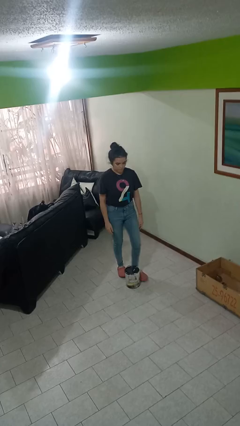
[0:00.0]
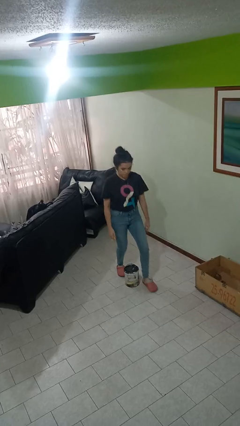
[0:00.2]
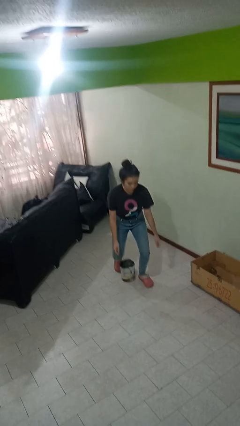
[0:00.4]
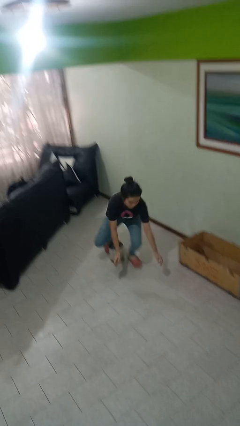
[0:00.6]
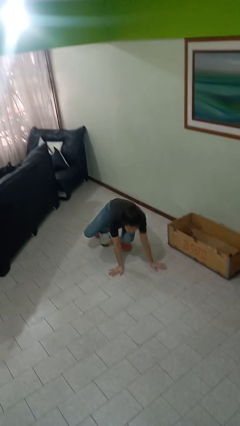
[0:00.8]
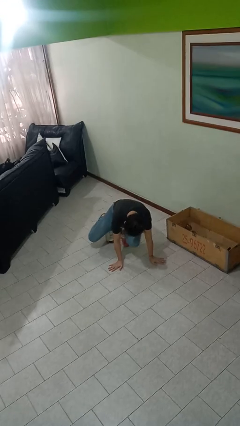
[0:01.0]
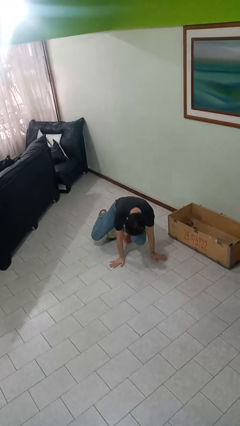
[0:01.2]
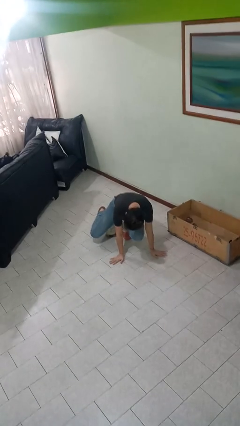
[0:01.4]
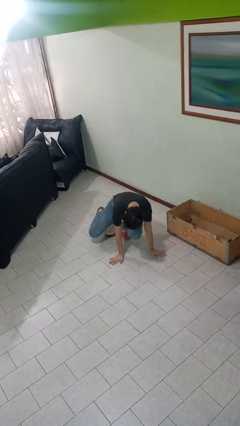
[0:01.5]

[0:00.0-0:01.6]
person trips on object on floor

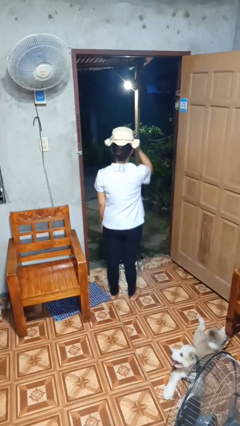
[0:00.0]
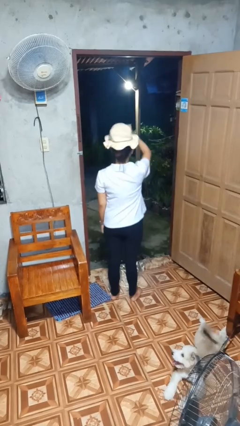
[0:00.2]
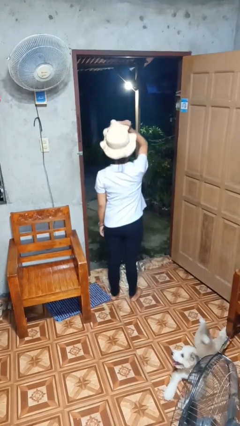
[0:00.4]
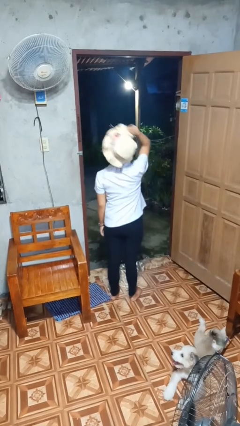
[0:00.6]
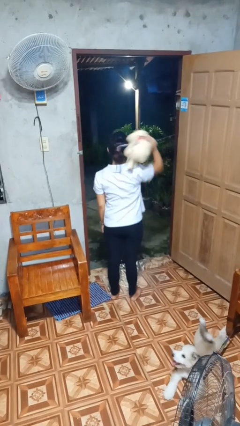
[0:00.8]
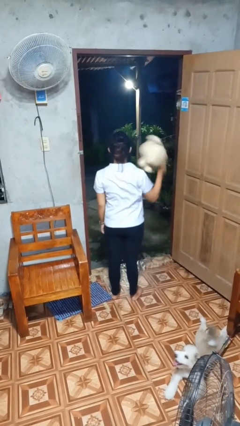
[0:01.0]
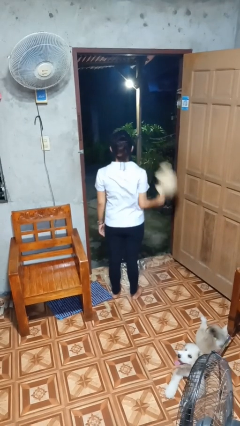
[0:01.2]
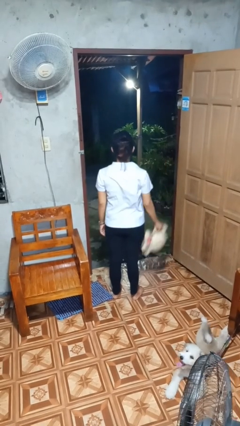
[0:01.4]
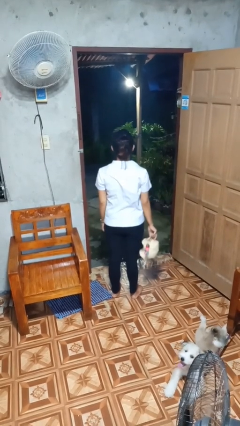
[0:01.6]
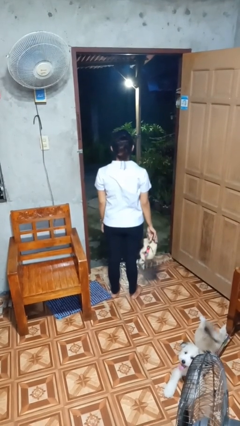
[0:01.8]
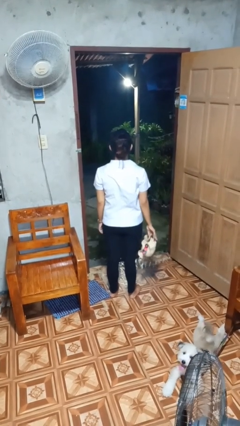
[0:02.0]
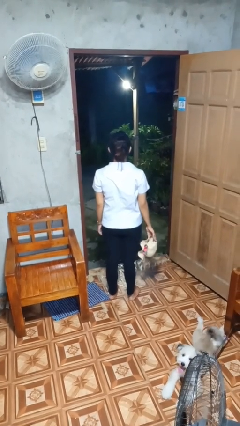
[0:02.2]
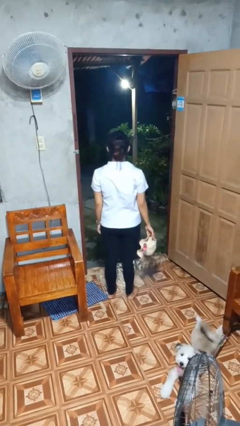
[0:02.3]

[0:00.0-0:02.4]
person takes off hat

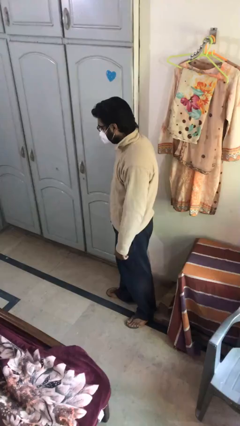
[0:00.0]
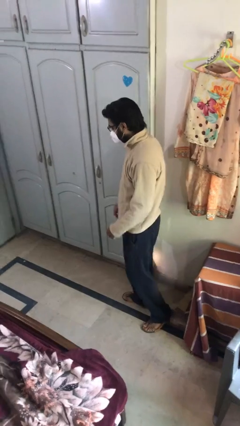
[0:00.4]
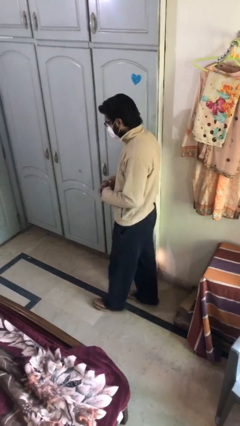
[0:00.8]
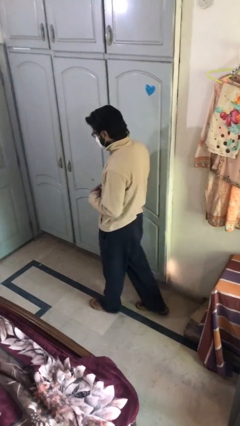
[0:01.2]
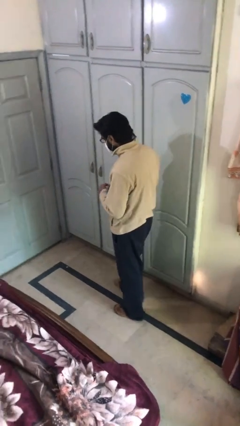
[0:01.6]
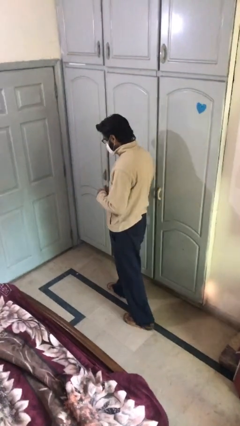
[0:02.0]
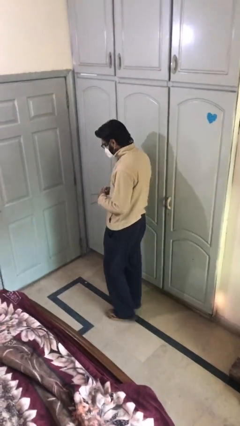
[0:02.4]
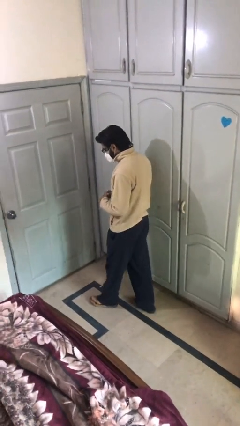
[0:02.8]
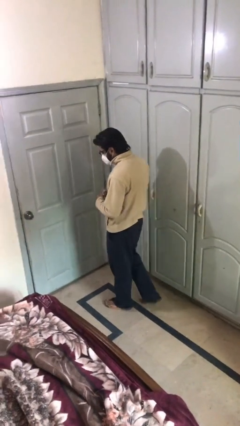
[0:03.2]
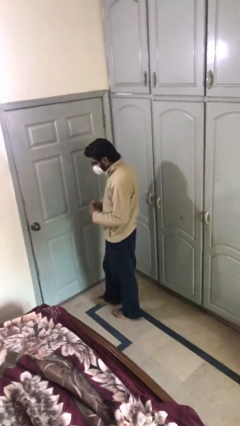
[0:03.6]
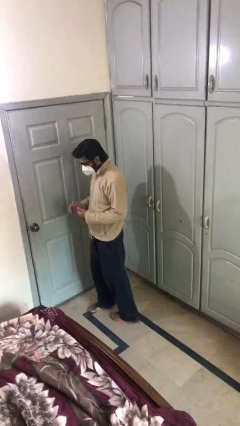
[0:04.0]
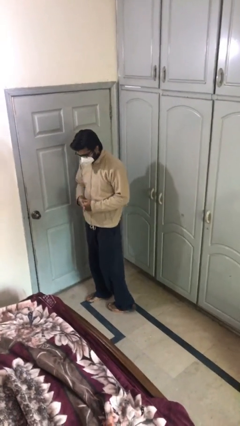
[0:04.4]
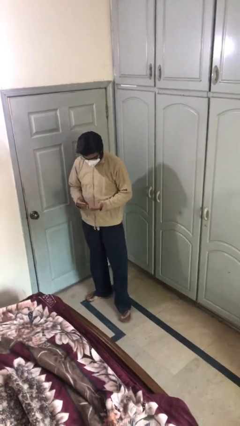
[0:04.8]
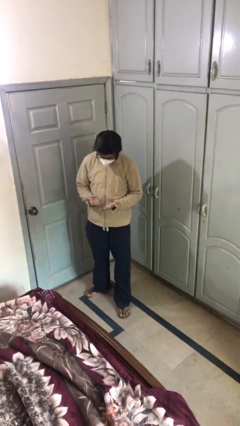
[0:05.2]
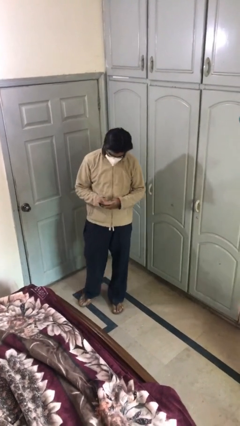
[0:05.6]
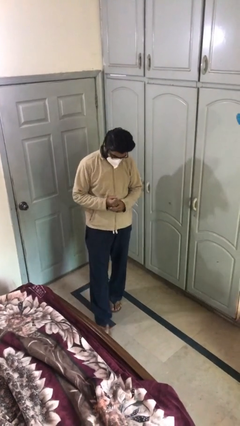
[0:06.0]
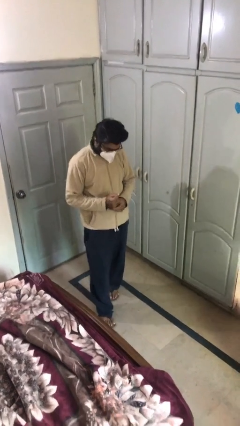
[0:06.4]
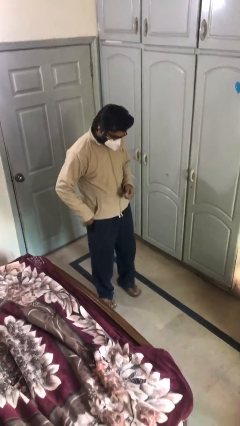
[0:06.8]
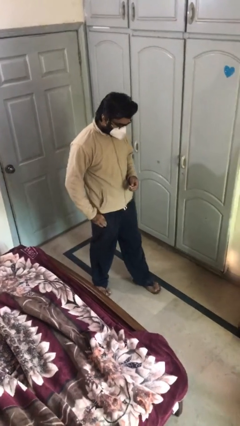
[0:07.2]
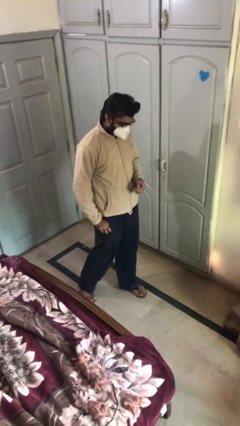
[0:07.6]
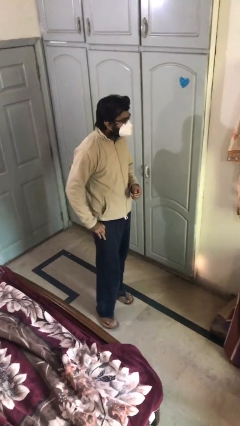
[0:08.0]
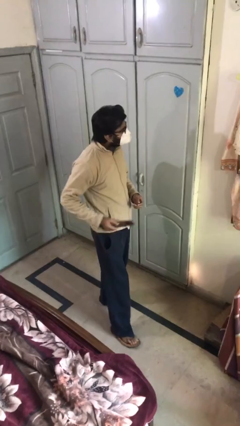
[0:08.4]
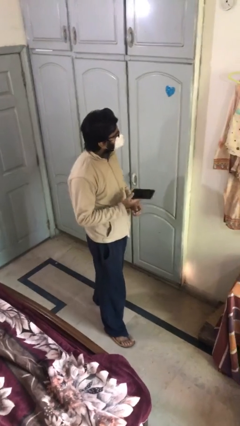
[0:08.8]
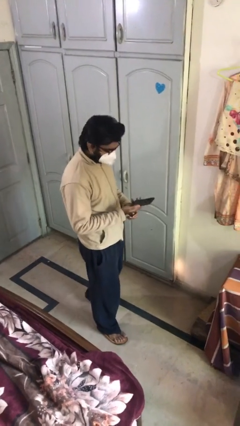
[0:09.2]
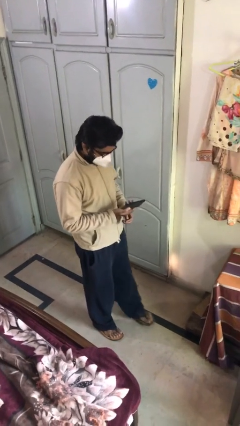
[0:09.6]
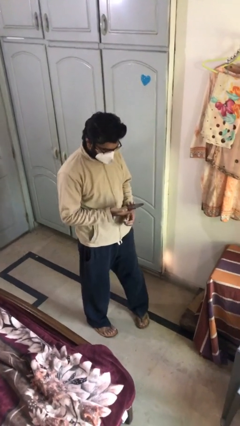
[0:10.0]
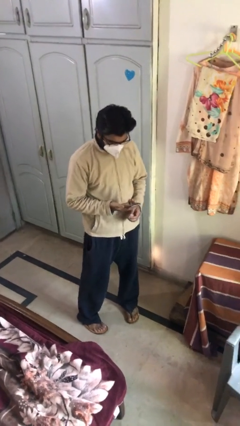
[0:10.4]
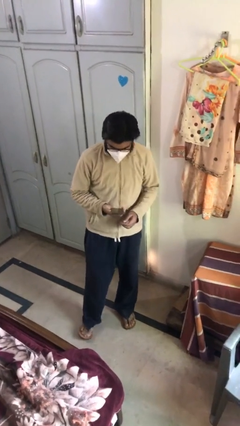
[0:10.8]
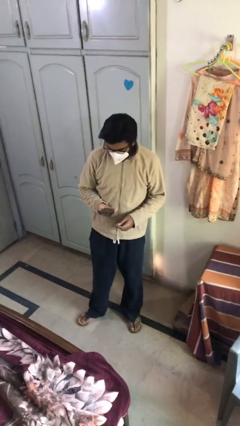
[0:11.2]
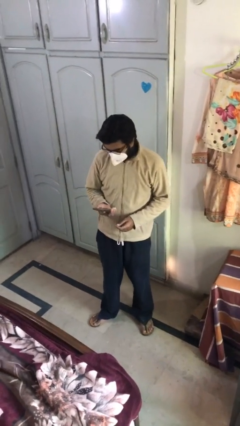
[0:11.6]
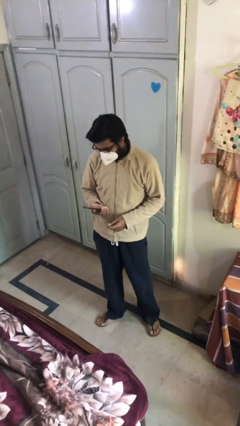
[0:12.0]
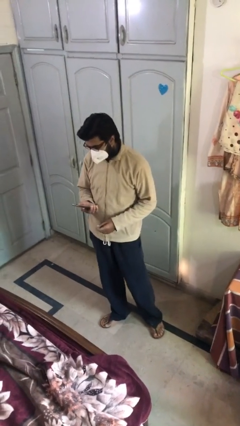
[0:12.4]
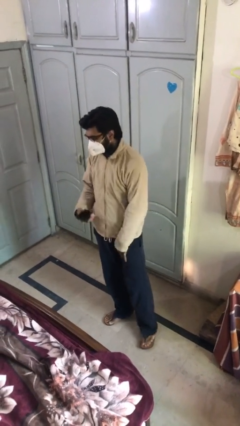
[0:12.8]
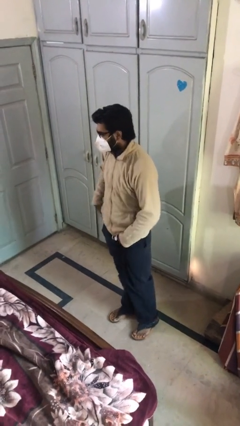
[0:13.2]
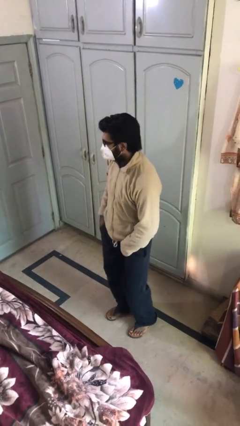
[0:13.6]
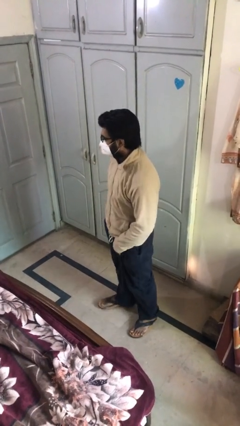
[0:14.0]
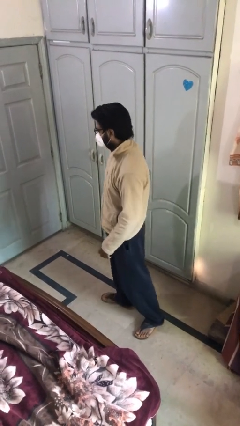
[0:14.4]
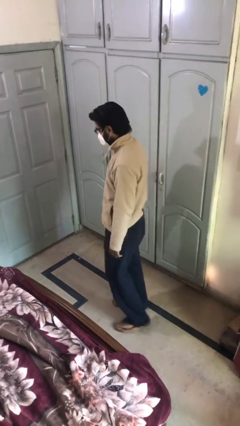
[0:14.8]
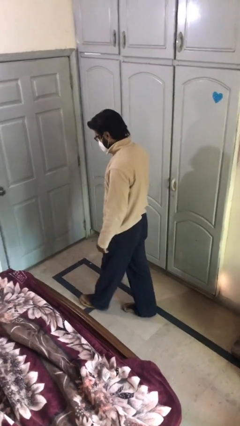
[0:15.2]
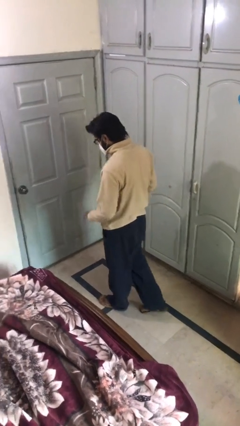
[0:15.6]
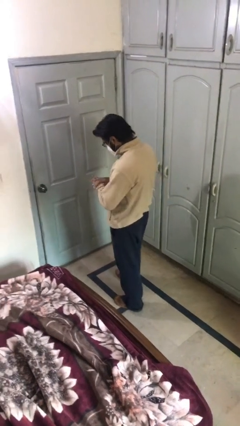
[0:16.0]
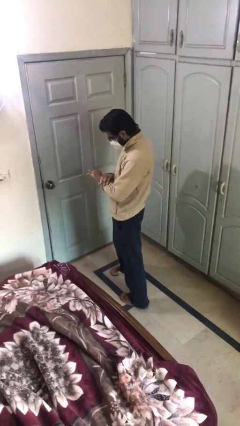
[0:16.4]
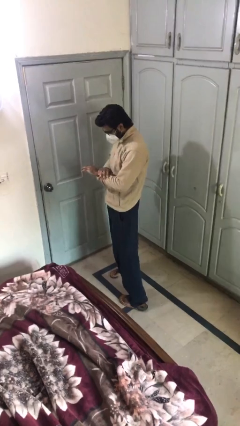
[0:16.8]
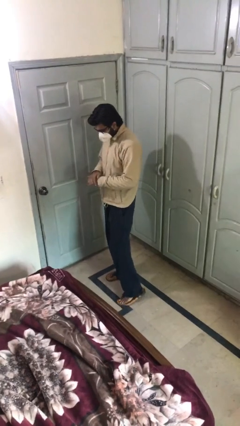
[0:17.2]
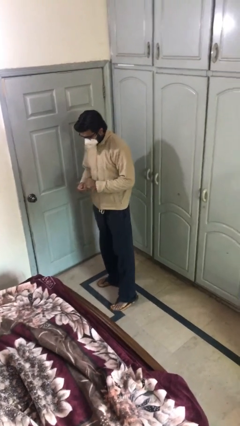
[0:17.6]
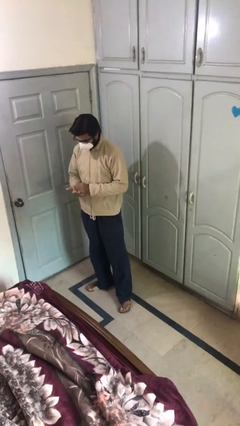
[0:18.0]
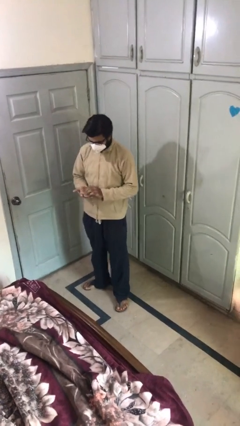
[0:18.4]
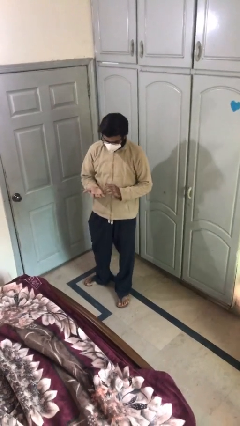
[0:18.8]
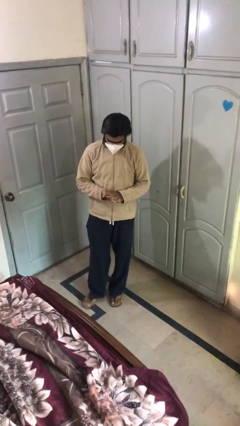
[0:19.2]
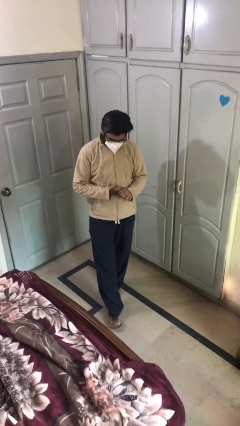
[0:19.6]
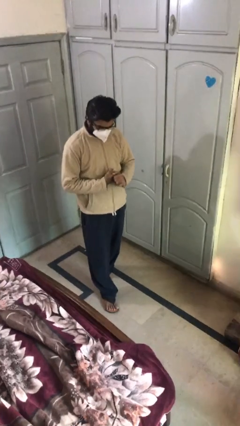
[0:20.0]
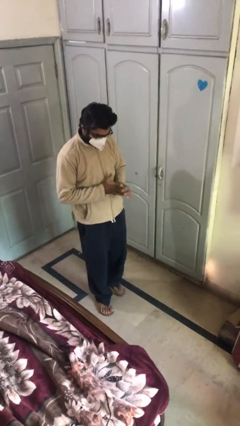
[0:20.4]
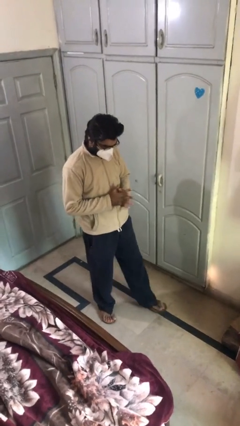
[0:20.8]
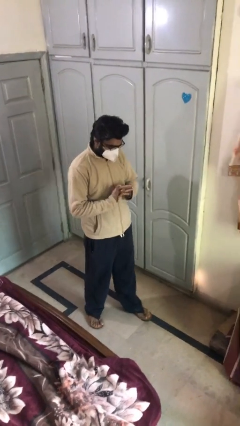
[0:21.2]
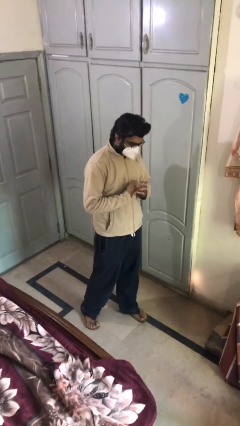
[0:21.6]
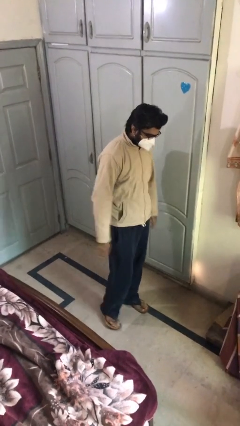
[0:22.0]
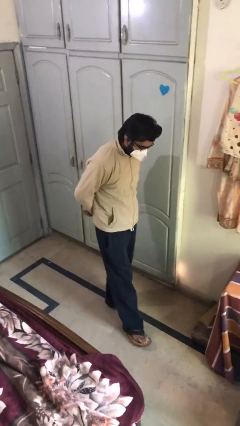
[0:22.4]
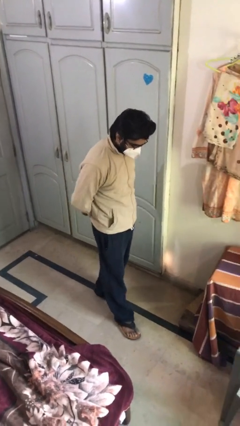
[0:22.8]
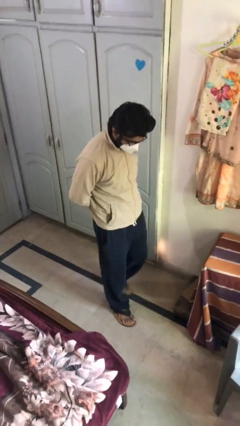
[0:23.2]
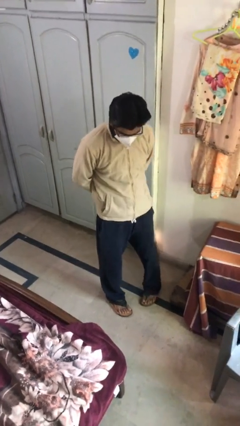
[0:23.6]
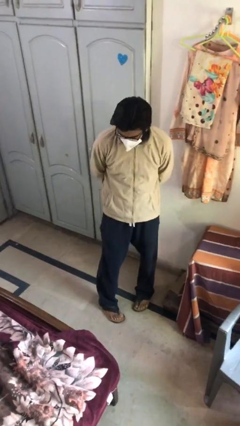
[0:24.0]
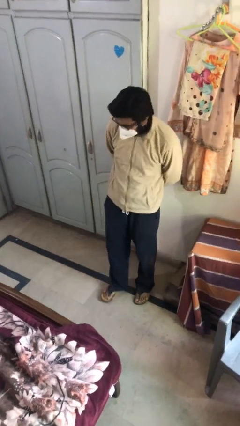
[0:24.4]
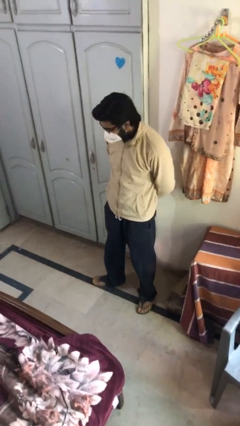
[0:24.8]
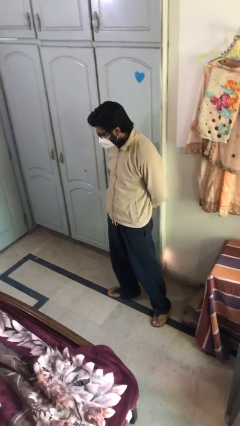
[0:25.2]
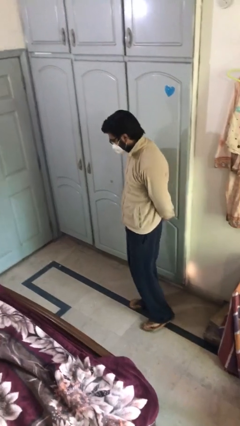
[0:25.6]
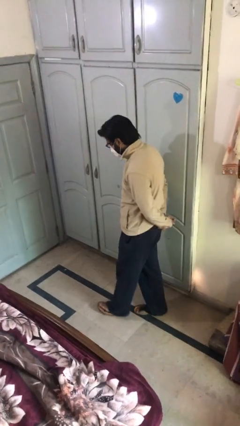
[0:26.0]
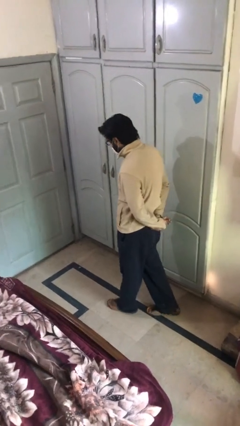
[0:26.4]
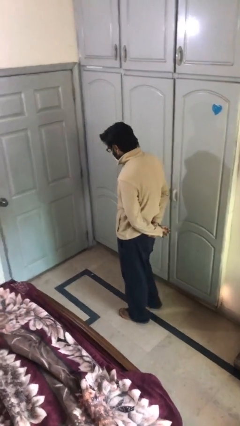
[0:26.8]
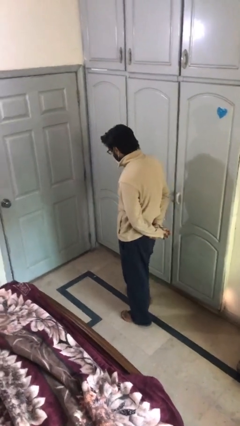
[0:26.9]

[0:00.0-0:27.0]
person walks

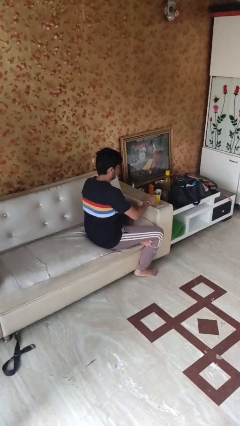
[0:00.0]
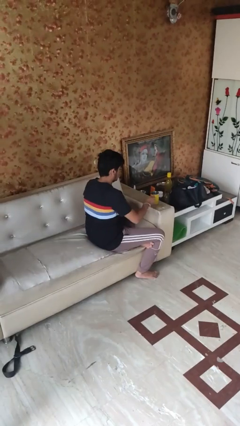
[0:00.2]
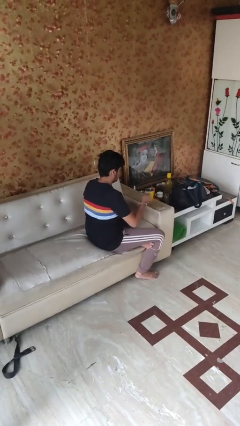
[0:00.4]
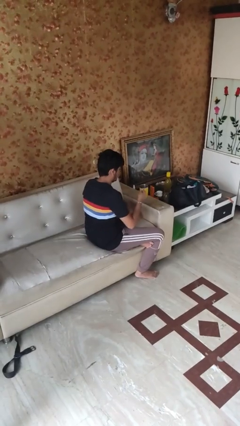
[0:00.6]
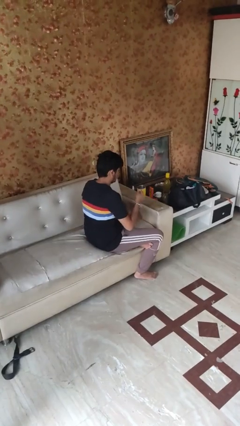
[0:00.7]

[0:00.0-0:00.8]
person picks up object from table
